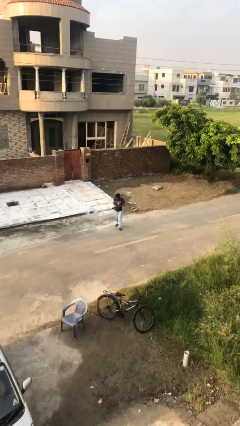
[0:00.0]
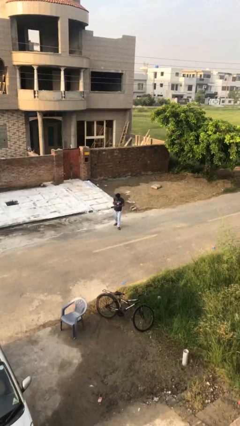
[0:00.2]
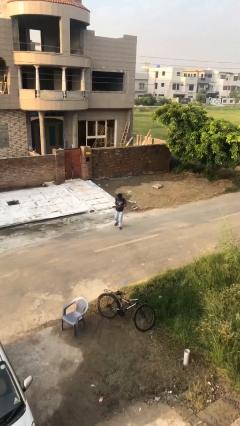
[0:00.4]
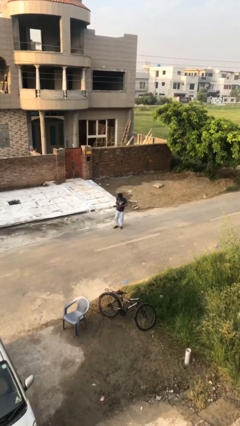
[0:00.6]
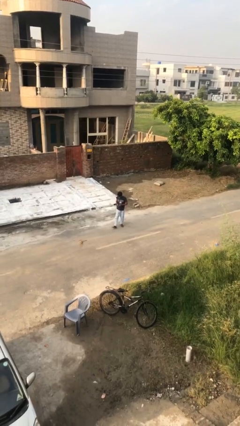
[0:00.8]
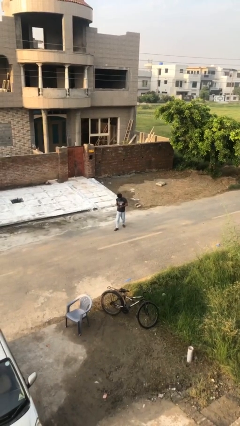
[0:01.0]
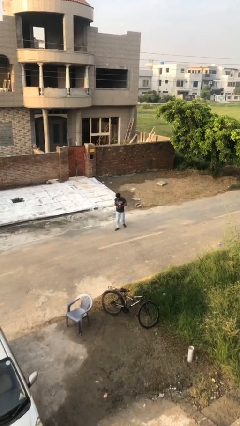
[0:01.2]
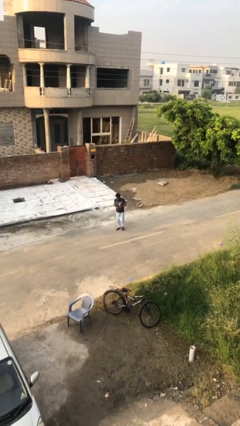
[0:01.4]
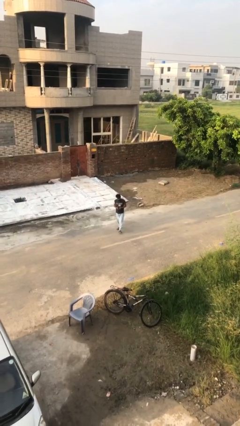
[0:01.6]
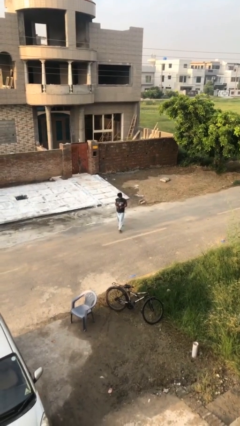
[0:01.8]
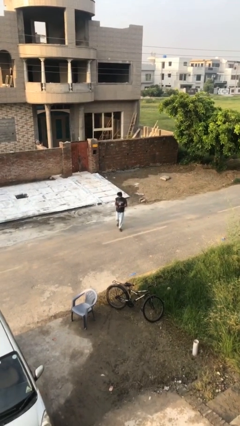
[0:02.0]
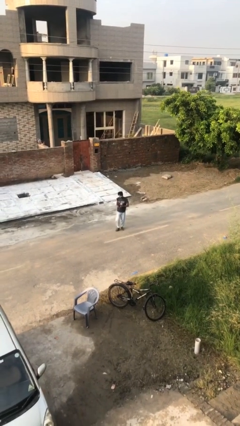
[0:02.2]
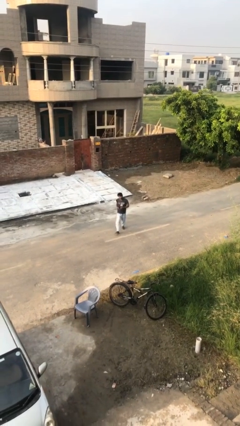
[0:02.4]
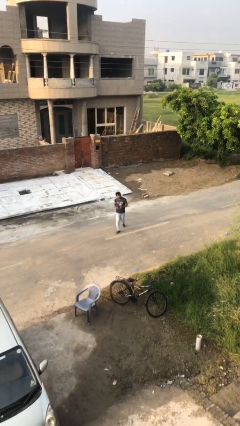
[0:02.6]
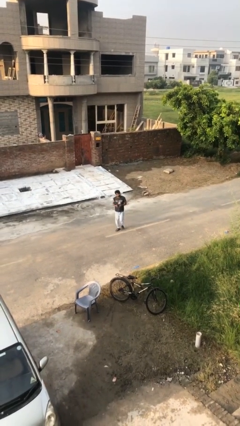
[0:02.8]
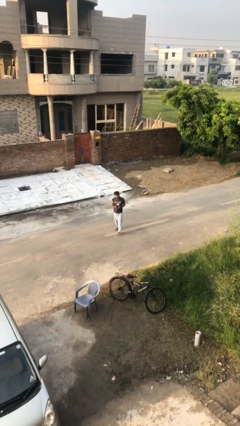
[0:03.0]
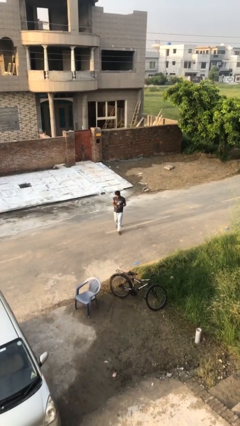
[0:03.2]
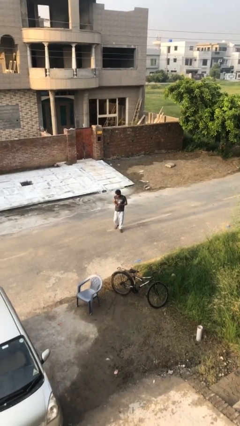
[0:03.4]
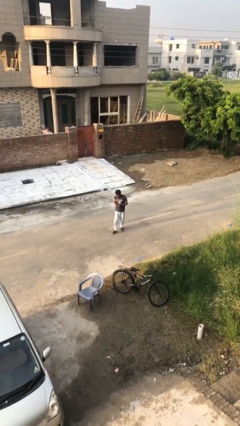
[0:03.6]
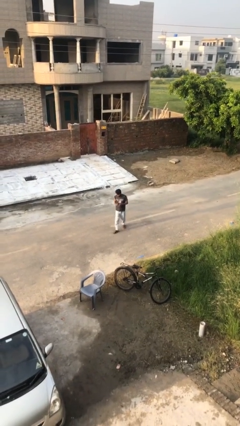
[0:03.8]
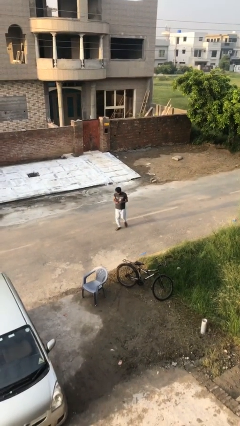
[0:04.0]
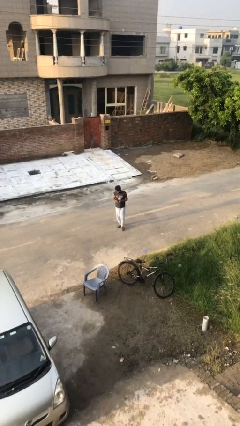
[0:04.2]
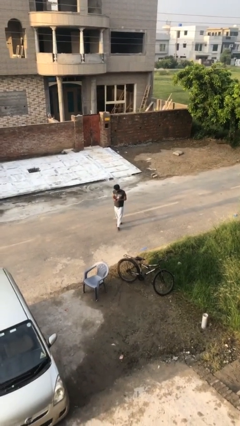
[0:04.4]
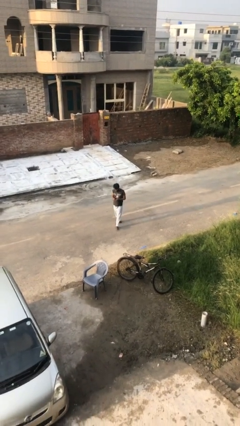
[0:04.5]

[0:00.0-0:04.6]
person texts on phone

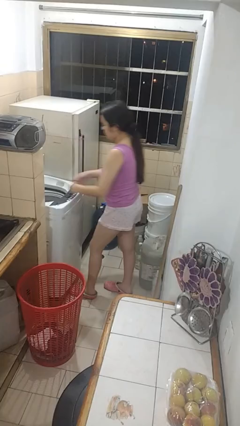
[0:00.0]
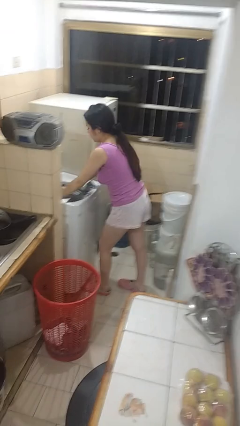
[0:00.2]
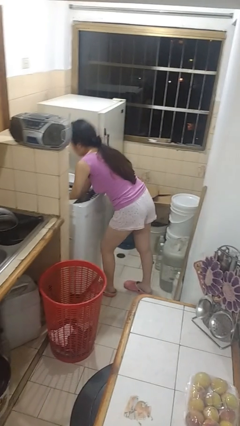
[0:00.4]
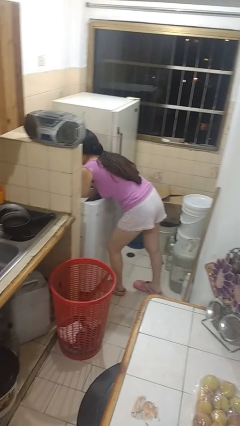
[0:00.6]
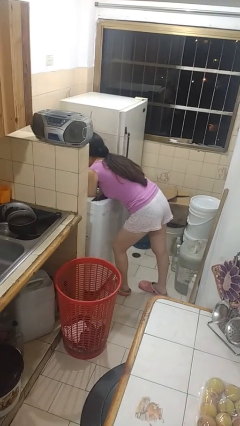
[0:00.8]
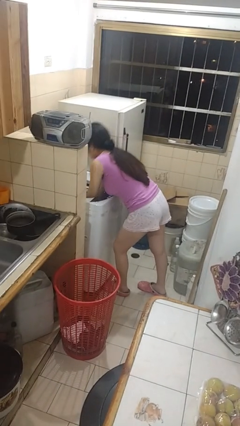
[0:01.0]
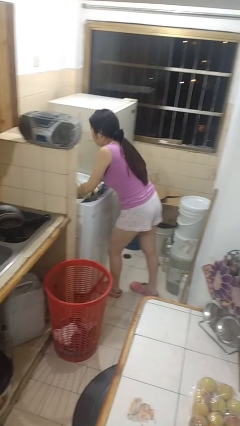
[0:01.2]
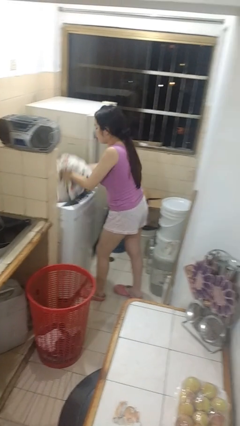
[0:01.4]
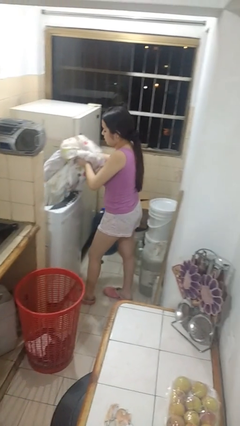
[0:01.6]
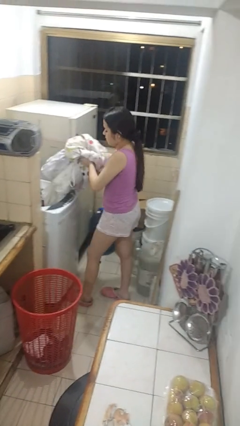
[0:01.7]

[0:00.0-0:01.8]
person unloads clotheswasher

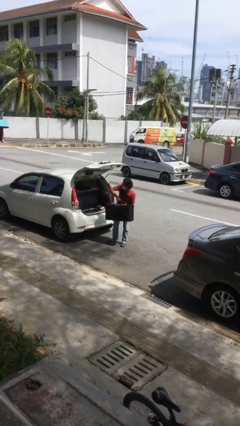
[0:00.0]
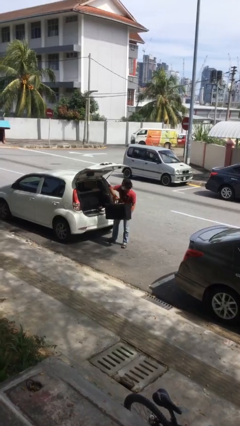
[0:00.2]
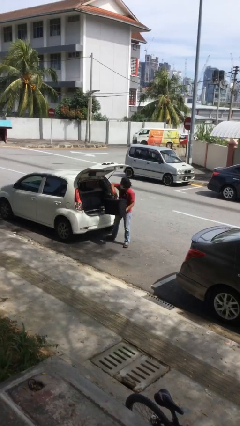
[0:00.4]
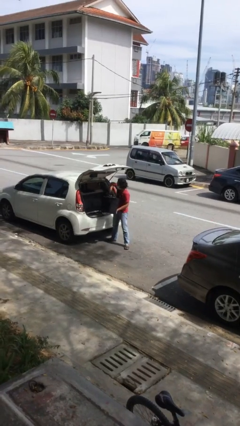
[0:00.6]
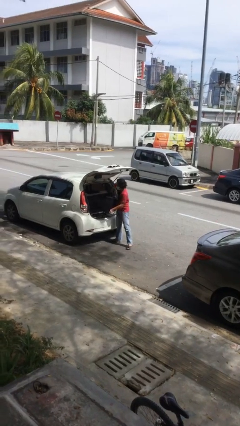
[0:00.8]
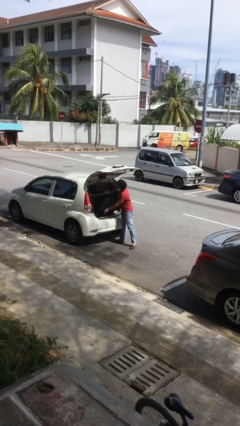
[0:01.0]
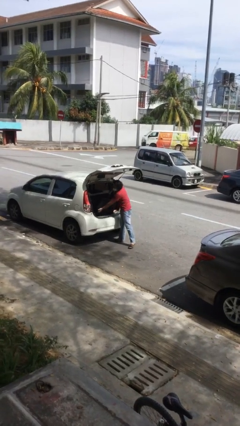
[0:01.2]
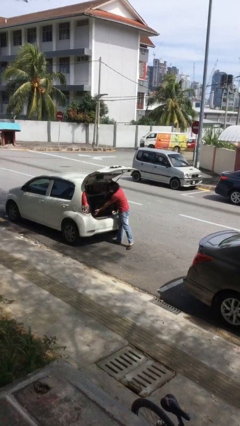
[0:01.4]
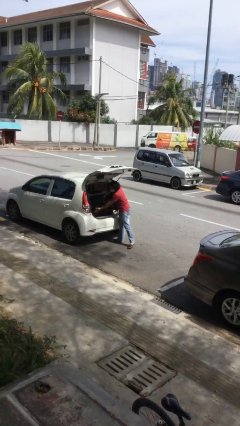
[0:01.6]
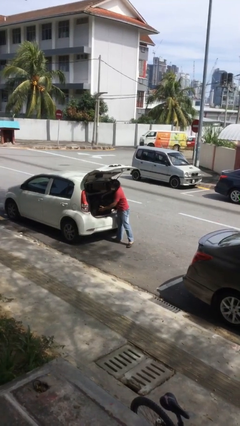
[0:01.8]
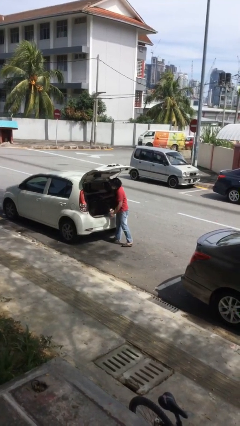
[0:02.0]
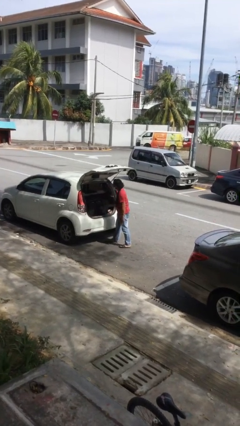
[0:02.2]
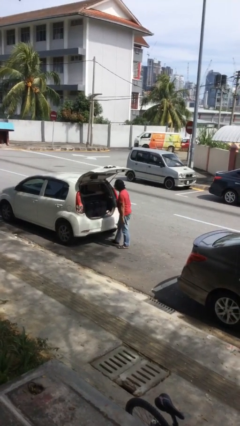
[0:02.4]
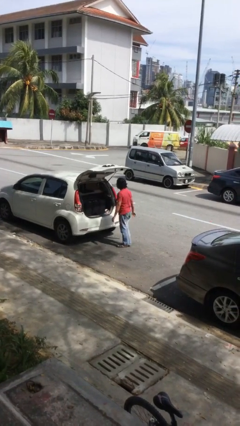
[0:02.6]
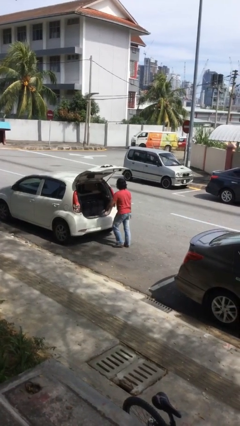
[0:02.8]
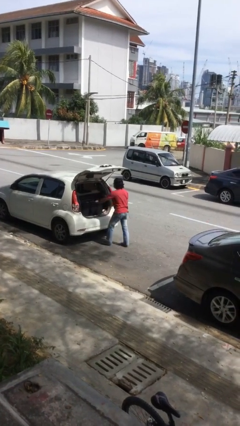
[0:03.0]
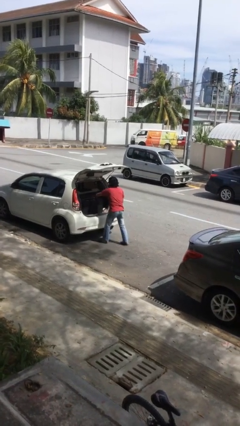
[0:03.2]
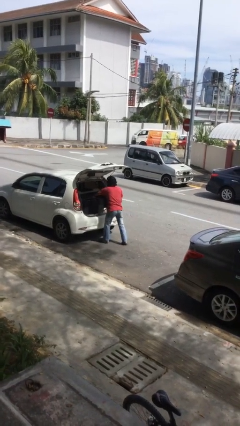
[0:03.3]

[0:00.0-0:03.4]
person loads car

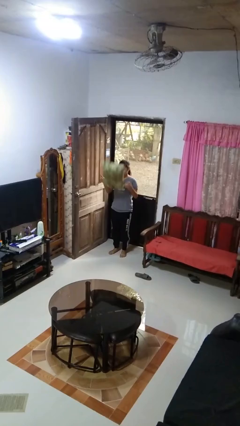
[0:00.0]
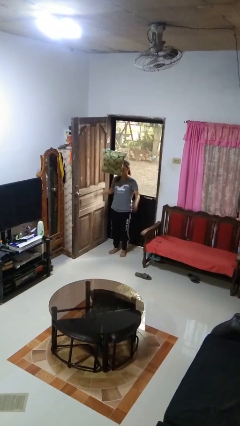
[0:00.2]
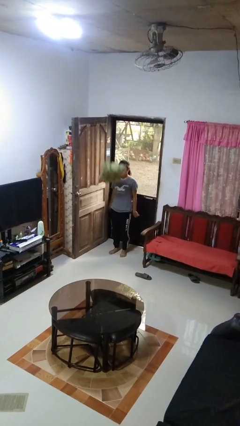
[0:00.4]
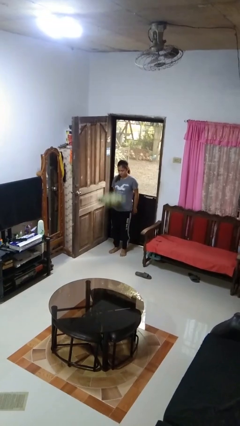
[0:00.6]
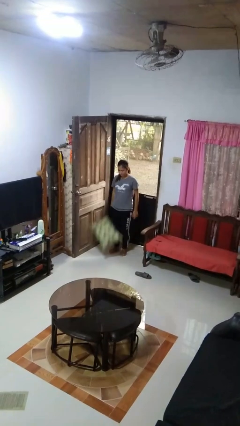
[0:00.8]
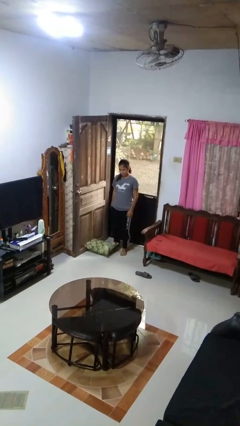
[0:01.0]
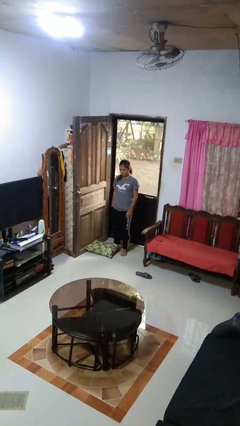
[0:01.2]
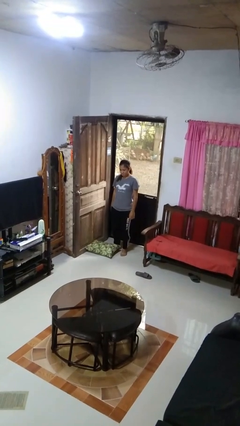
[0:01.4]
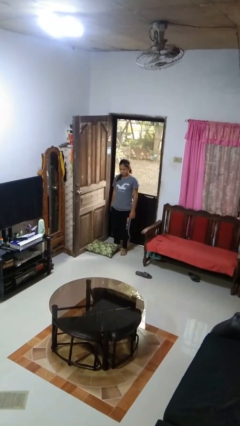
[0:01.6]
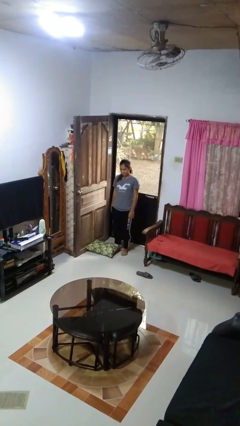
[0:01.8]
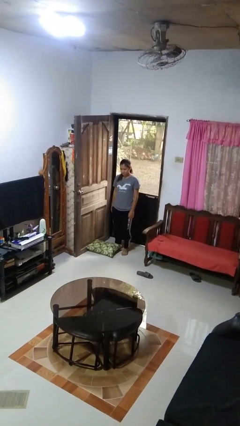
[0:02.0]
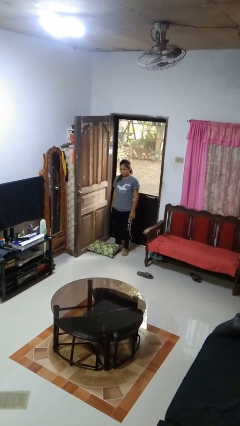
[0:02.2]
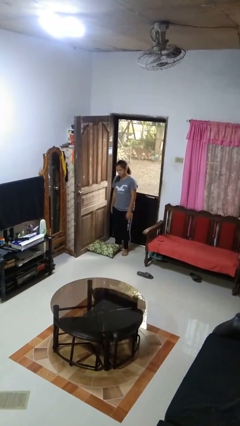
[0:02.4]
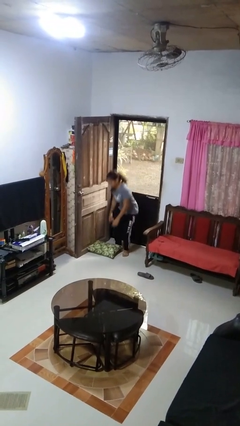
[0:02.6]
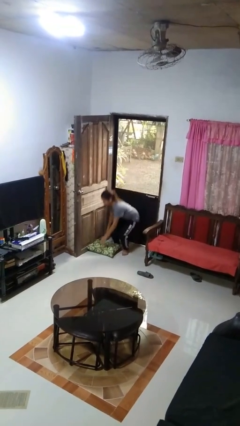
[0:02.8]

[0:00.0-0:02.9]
person throws object into air

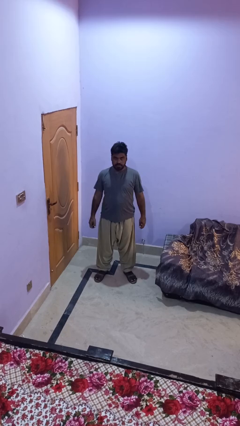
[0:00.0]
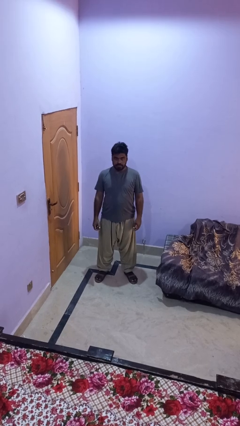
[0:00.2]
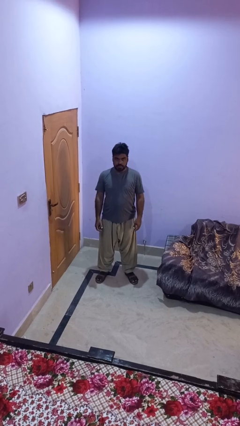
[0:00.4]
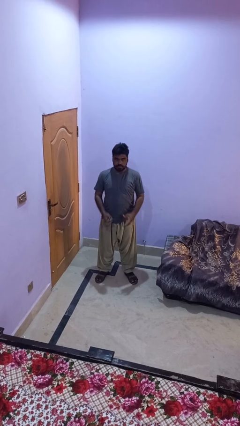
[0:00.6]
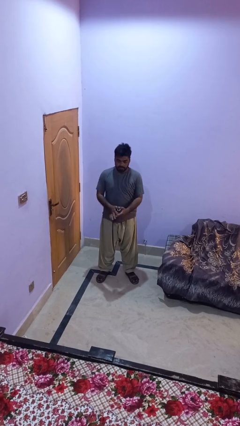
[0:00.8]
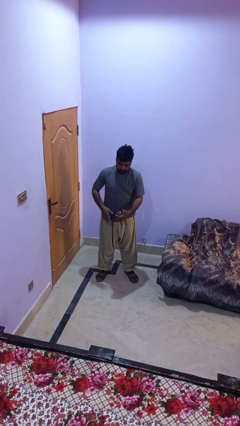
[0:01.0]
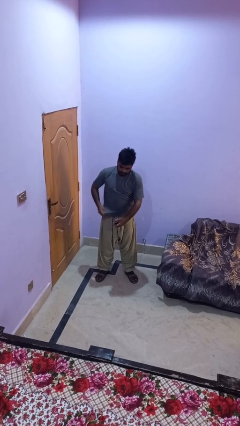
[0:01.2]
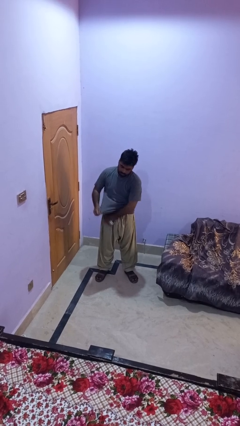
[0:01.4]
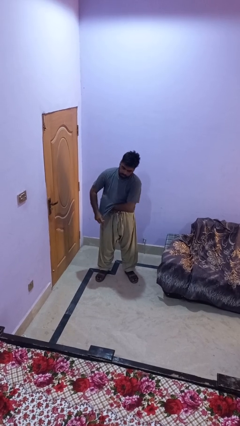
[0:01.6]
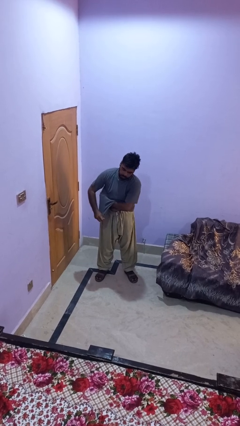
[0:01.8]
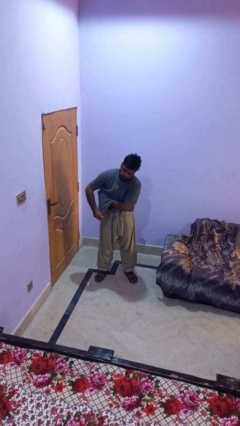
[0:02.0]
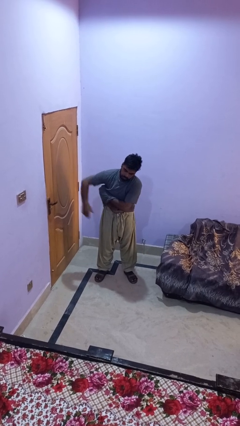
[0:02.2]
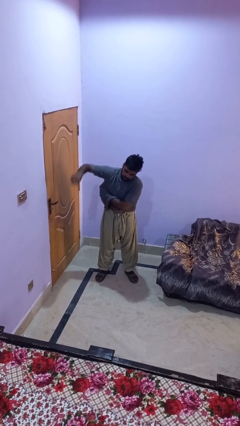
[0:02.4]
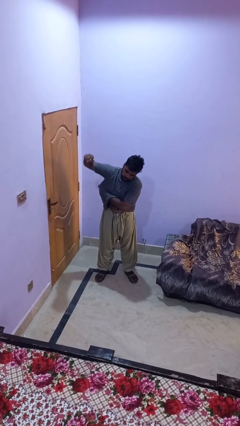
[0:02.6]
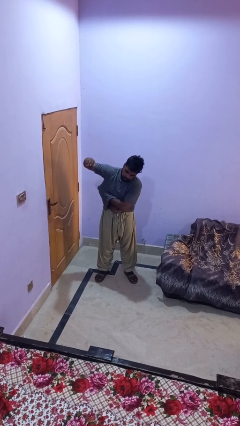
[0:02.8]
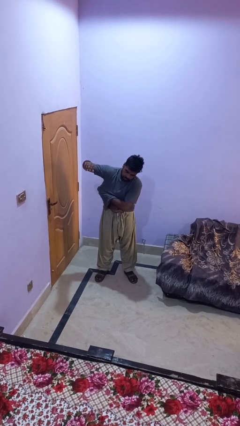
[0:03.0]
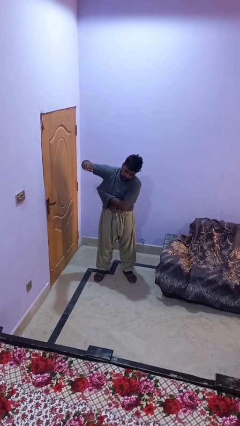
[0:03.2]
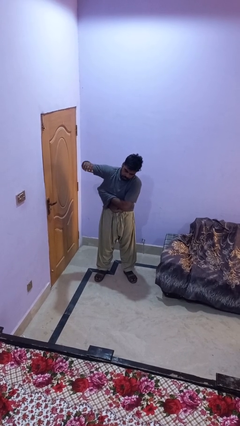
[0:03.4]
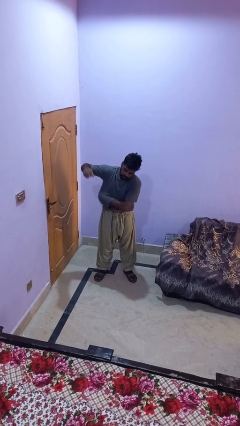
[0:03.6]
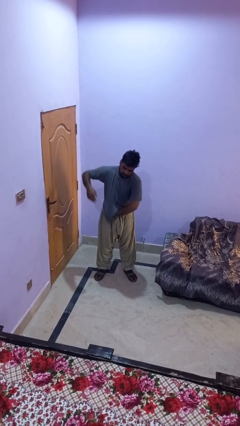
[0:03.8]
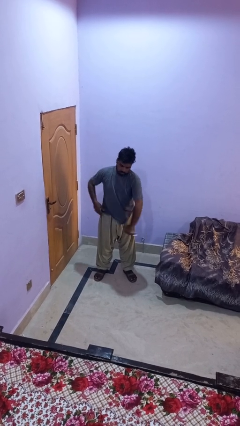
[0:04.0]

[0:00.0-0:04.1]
person applies deodorant

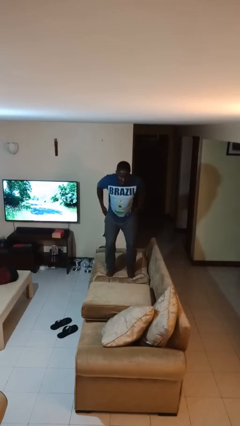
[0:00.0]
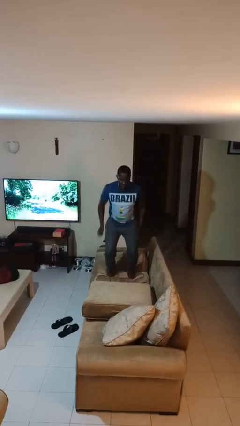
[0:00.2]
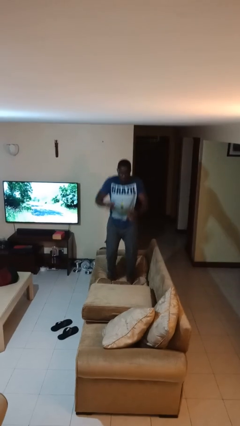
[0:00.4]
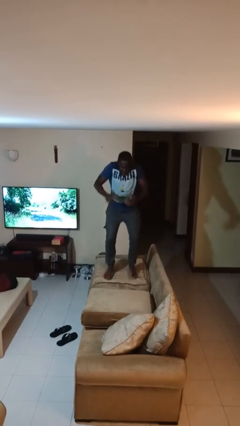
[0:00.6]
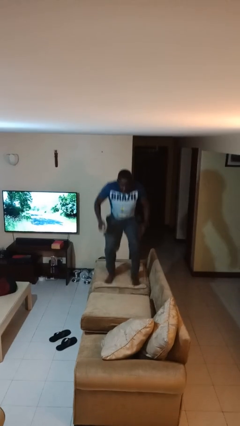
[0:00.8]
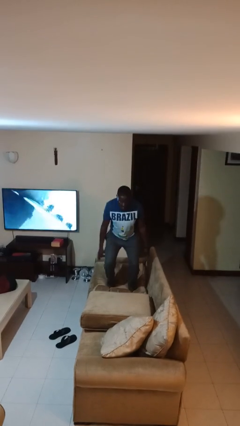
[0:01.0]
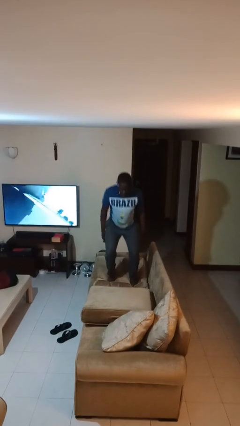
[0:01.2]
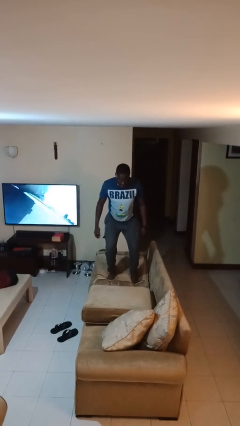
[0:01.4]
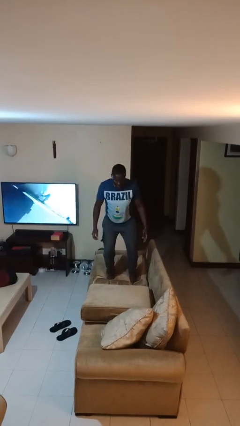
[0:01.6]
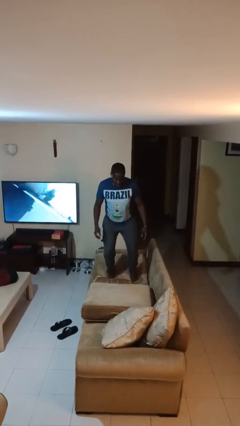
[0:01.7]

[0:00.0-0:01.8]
person jumps on couch
